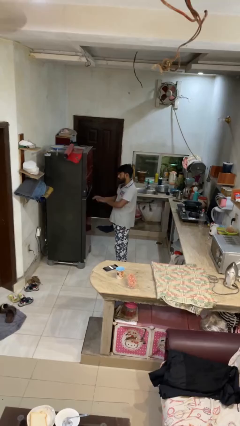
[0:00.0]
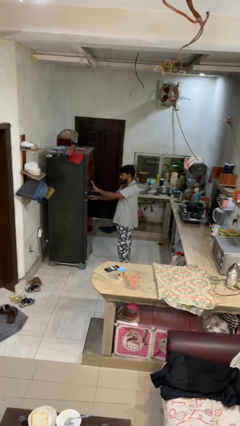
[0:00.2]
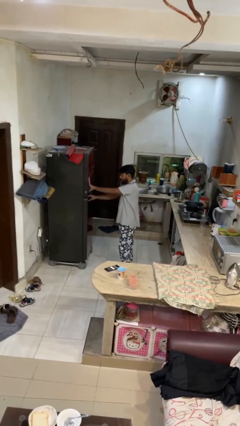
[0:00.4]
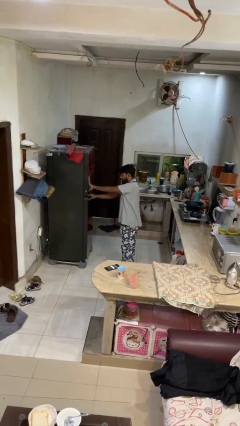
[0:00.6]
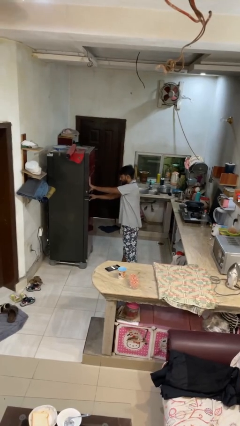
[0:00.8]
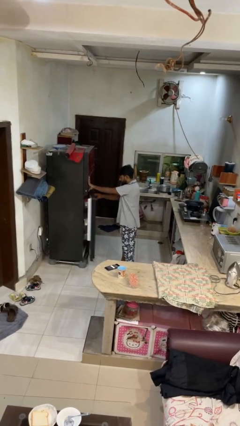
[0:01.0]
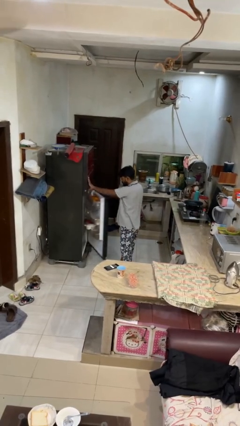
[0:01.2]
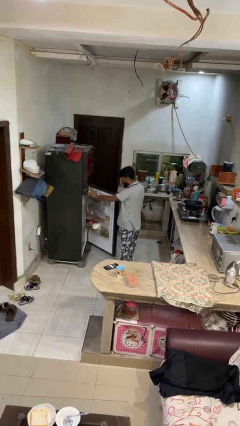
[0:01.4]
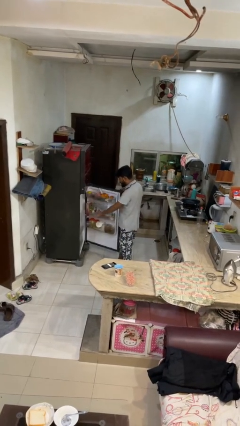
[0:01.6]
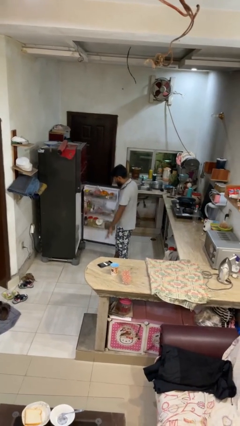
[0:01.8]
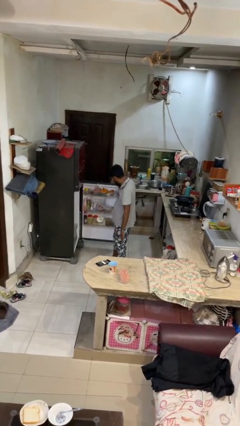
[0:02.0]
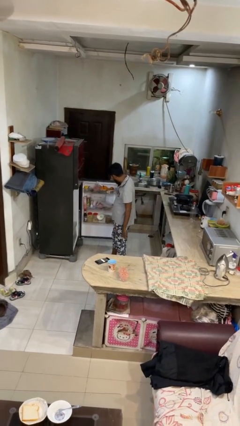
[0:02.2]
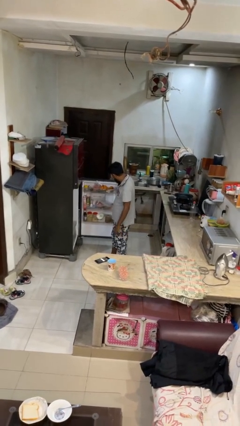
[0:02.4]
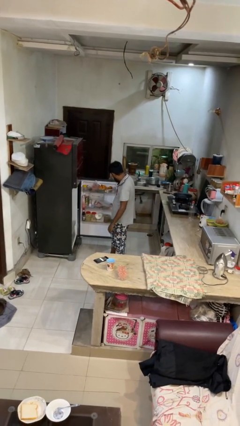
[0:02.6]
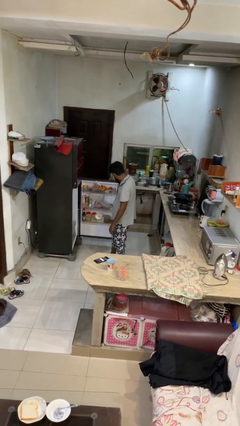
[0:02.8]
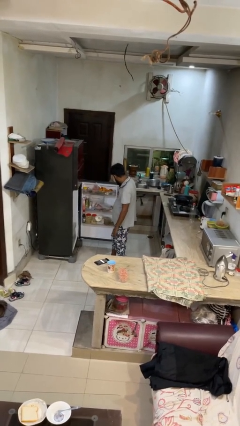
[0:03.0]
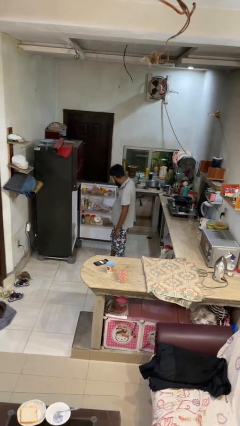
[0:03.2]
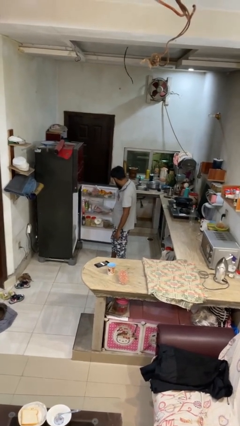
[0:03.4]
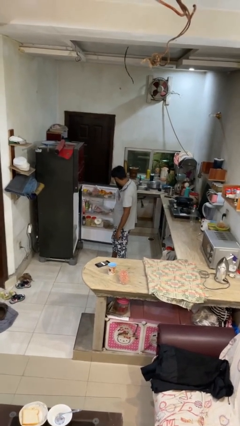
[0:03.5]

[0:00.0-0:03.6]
person opens refrigerator

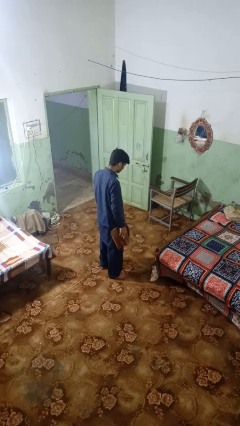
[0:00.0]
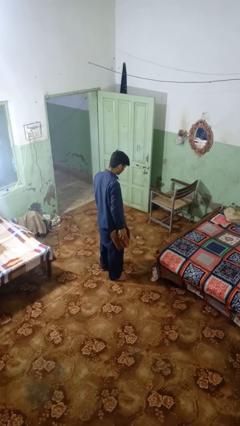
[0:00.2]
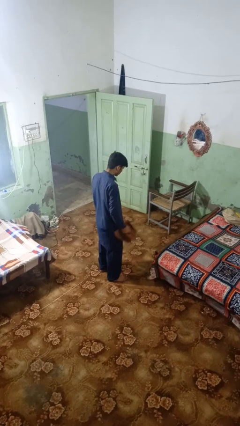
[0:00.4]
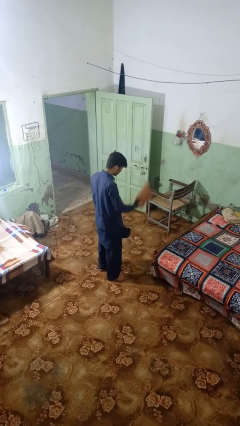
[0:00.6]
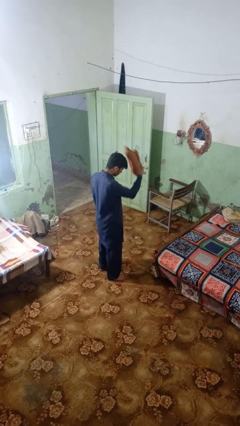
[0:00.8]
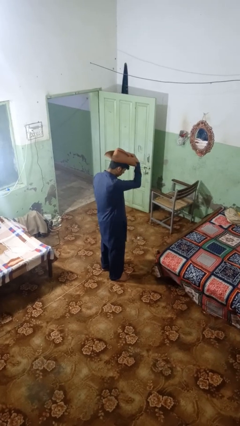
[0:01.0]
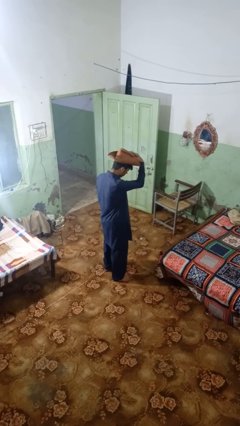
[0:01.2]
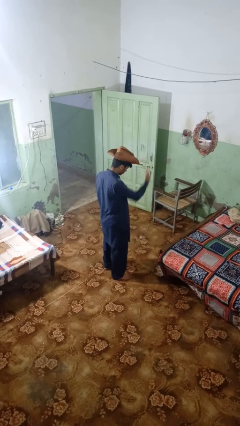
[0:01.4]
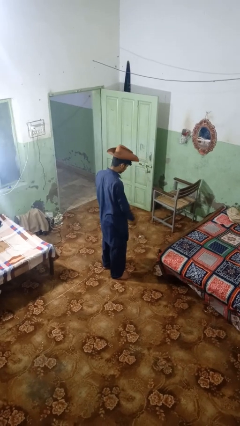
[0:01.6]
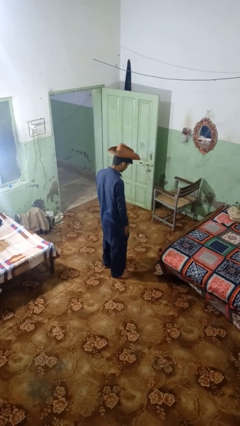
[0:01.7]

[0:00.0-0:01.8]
person puts on hat

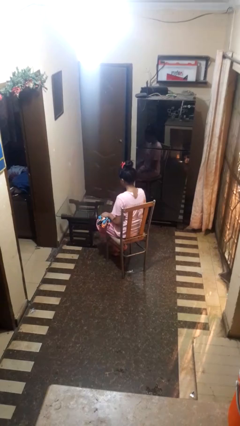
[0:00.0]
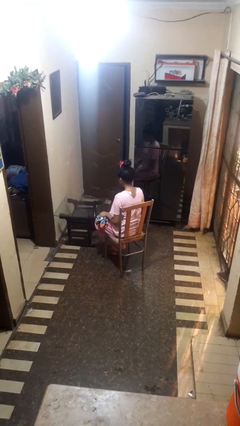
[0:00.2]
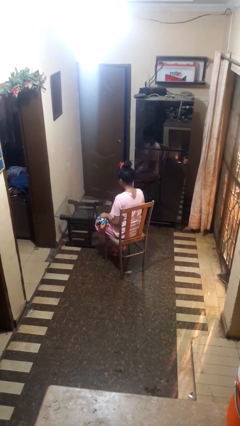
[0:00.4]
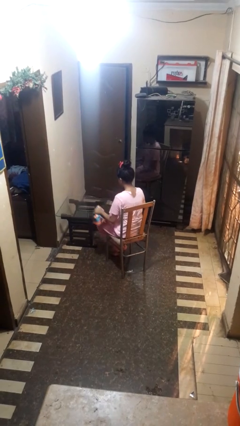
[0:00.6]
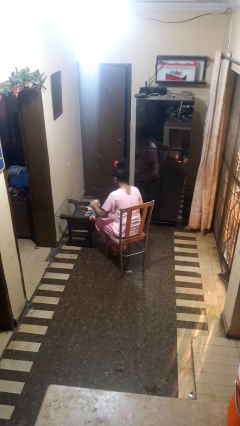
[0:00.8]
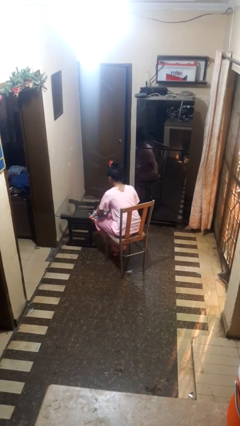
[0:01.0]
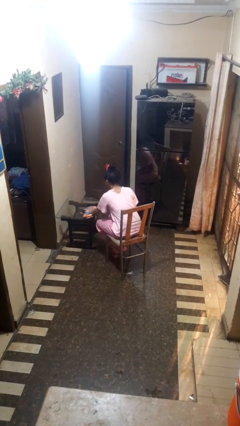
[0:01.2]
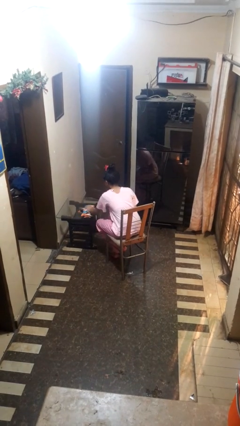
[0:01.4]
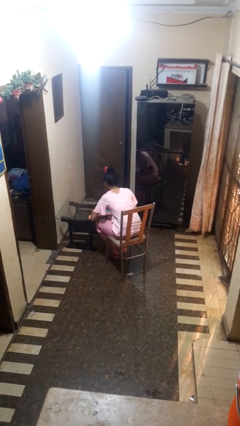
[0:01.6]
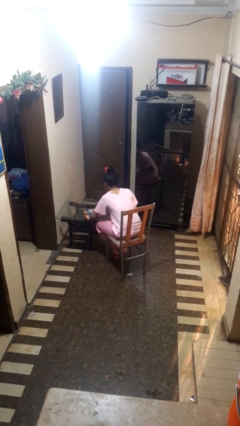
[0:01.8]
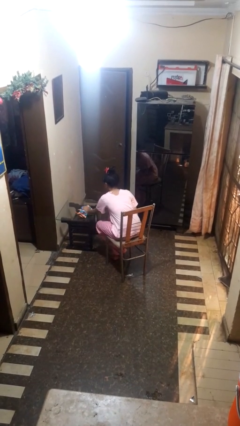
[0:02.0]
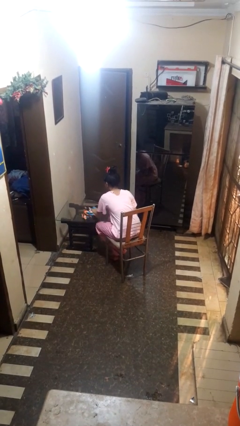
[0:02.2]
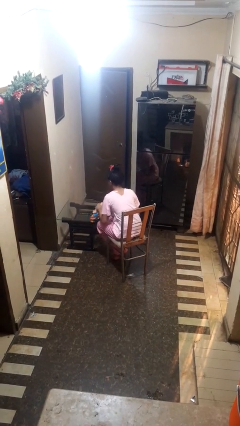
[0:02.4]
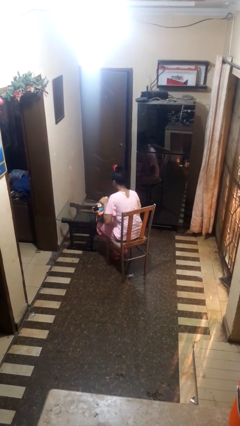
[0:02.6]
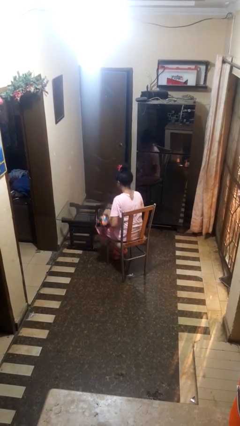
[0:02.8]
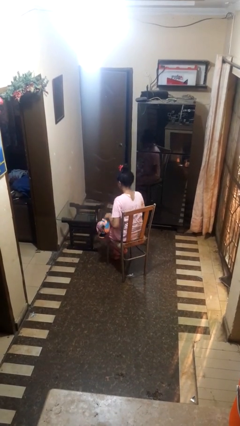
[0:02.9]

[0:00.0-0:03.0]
person cleans table with rag

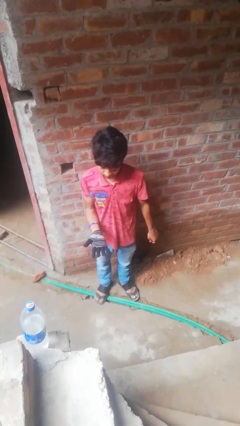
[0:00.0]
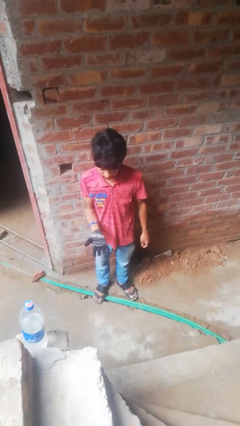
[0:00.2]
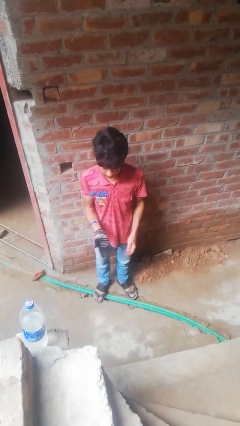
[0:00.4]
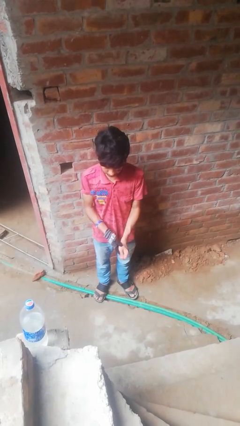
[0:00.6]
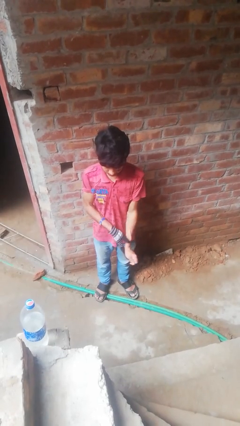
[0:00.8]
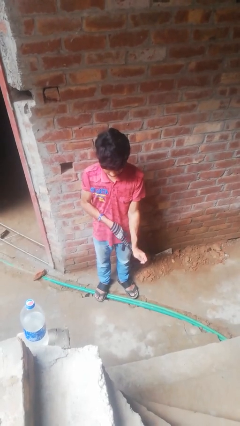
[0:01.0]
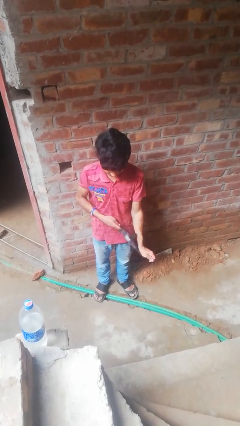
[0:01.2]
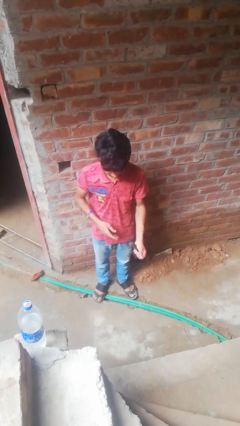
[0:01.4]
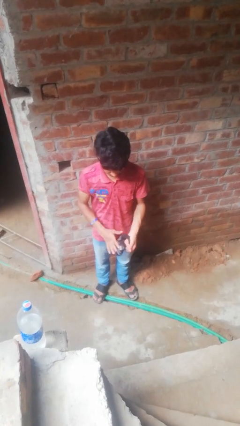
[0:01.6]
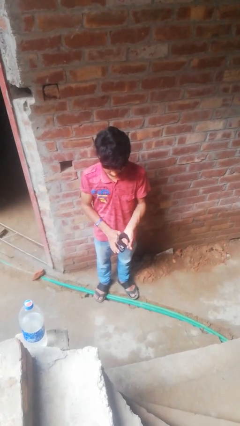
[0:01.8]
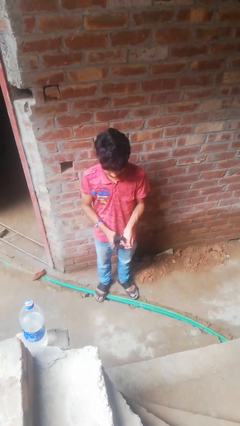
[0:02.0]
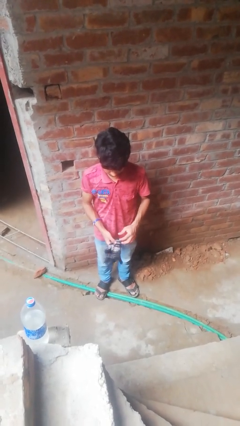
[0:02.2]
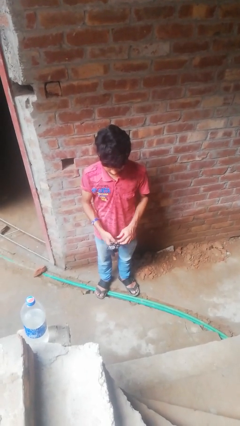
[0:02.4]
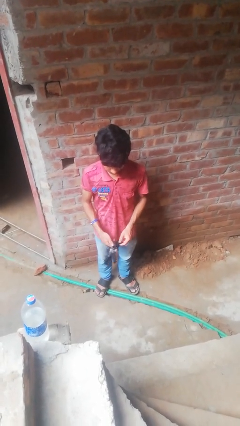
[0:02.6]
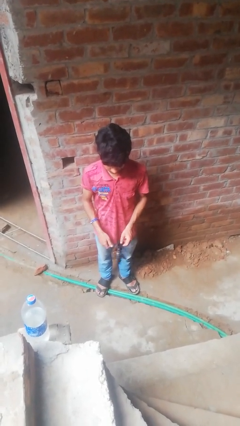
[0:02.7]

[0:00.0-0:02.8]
person takes off gloves

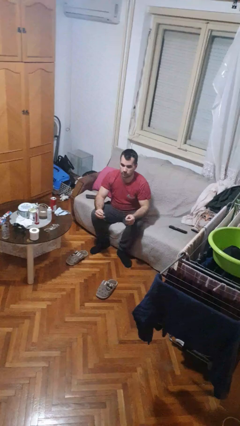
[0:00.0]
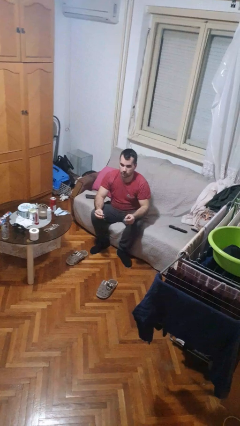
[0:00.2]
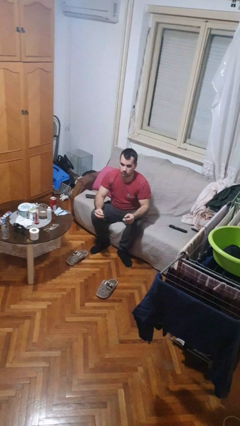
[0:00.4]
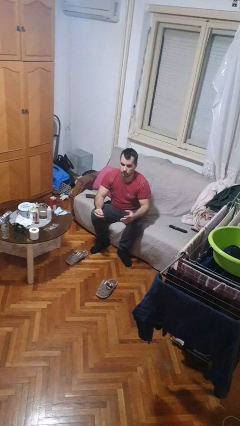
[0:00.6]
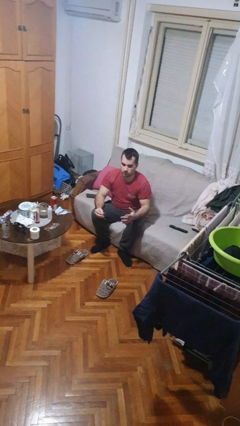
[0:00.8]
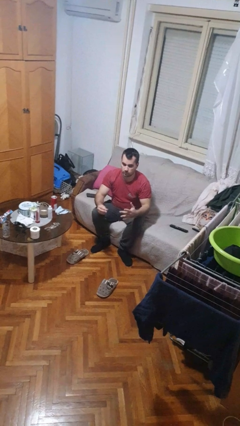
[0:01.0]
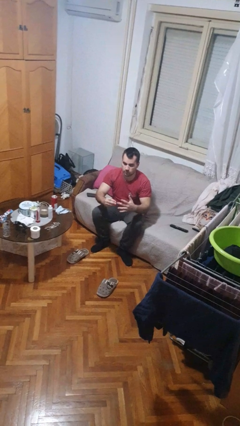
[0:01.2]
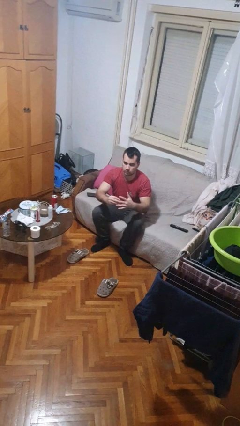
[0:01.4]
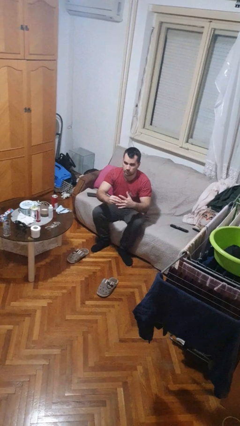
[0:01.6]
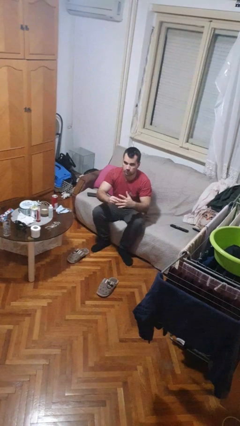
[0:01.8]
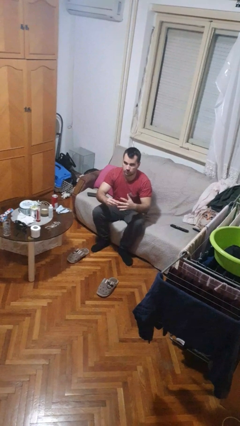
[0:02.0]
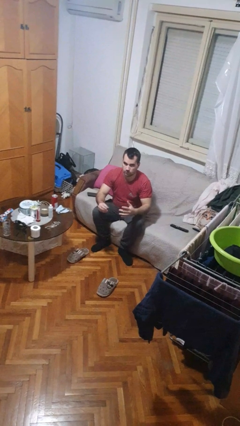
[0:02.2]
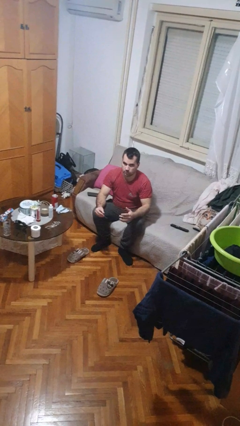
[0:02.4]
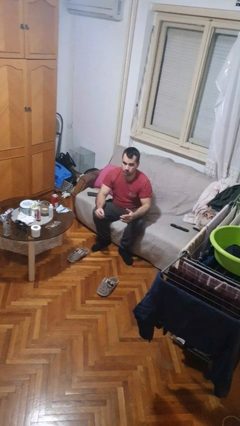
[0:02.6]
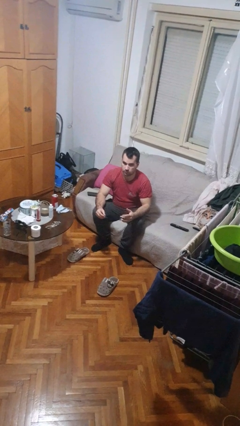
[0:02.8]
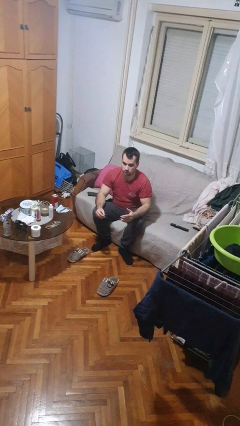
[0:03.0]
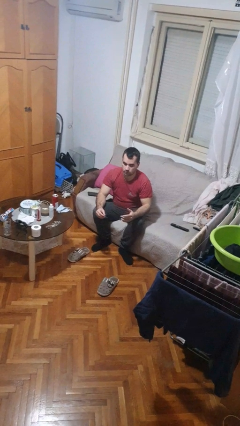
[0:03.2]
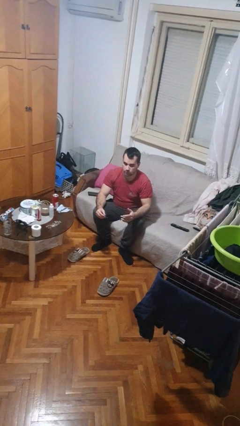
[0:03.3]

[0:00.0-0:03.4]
person puts on ring

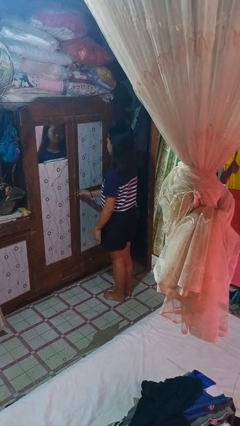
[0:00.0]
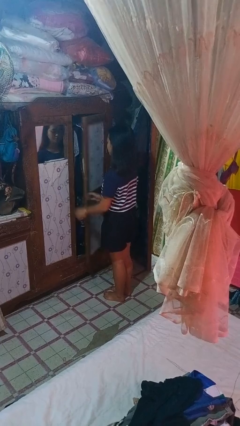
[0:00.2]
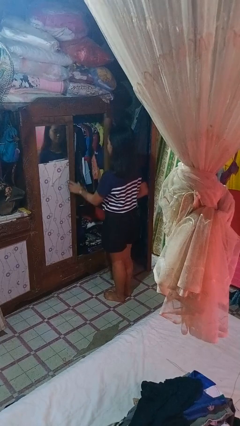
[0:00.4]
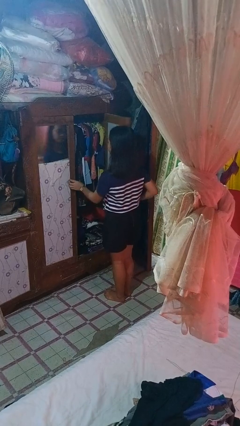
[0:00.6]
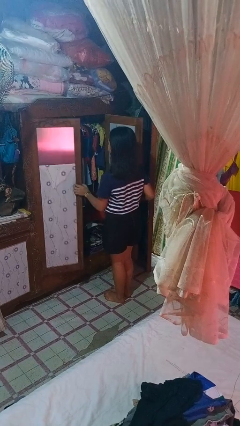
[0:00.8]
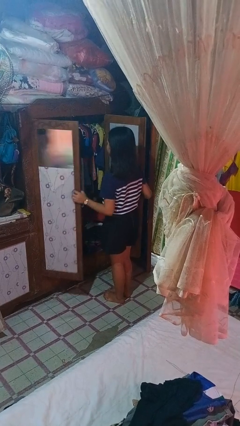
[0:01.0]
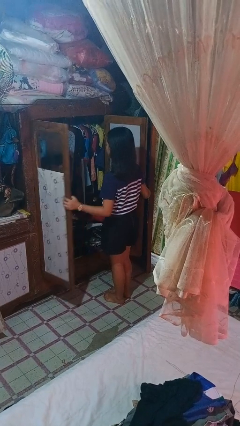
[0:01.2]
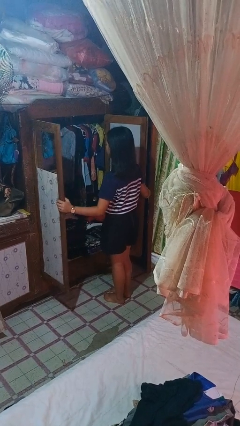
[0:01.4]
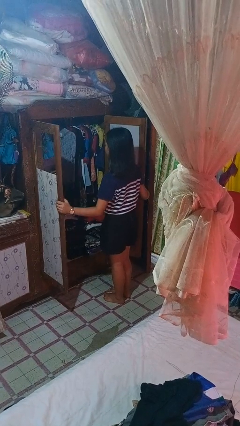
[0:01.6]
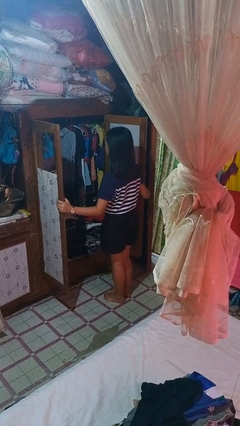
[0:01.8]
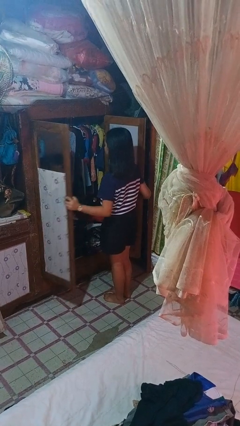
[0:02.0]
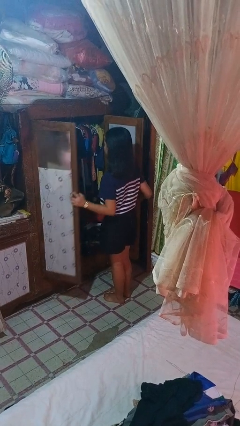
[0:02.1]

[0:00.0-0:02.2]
person opens closet door

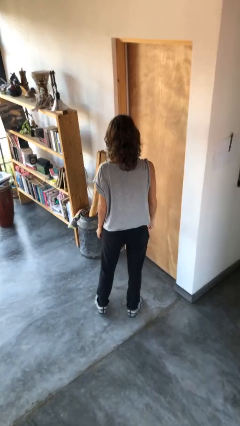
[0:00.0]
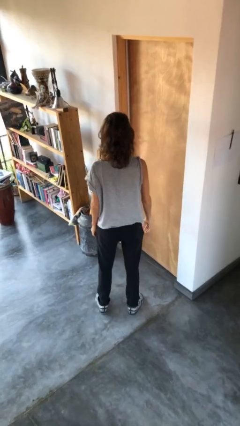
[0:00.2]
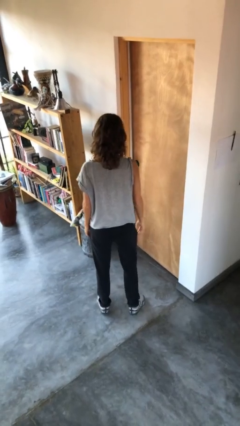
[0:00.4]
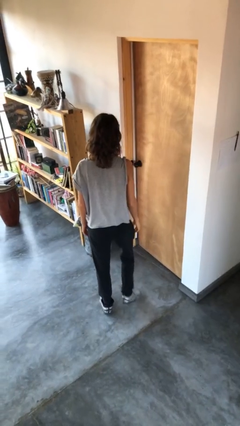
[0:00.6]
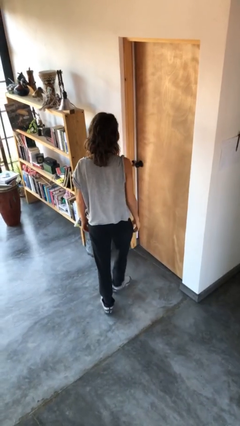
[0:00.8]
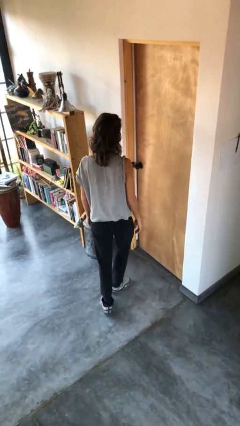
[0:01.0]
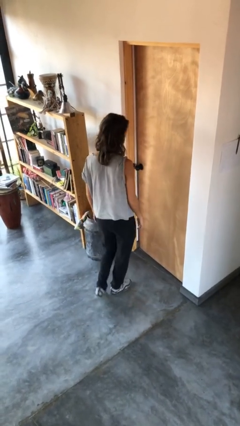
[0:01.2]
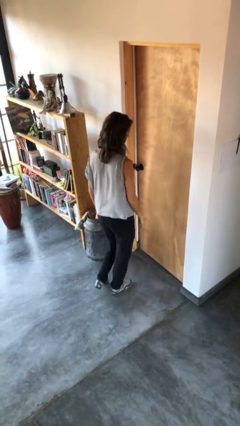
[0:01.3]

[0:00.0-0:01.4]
person opens facility door
